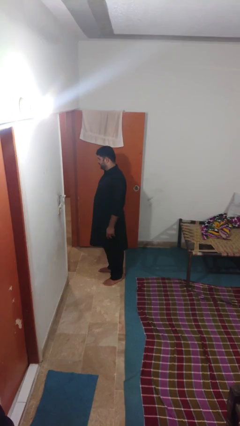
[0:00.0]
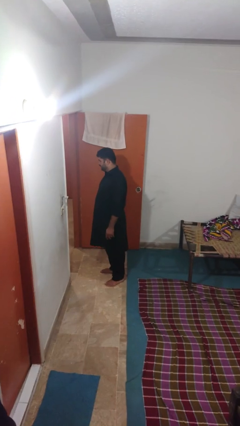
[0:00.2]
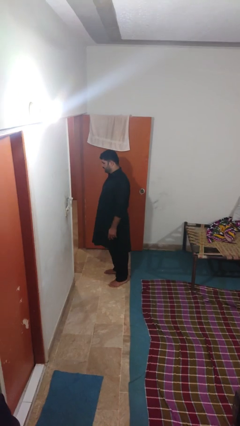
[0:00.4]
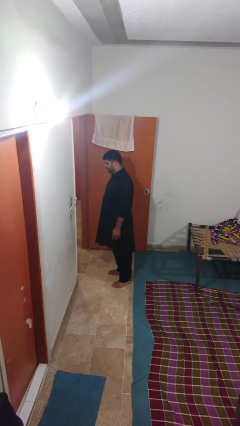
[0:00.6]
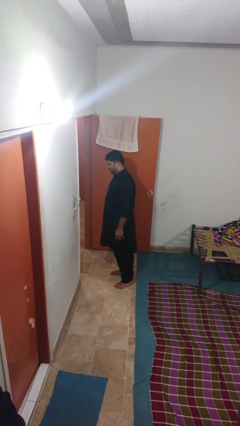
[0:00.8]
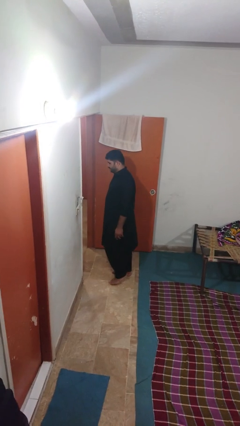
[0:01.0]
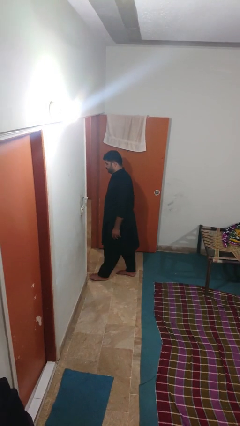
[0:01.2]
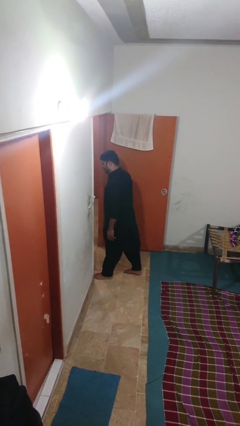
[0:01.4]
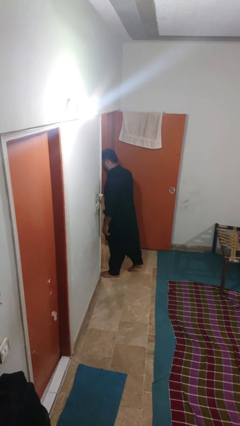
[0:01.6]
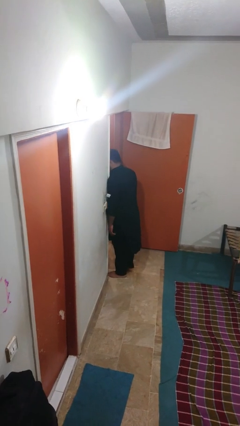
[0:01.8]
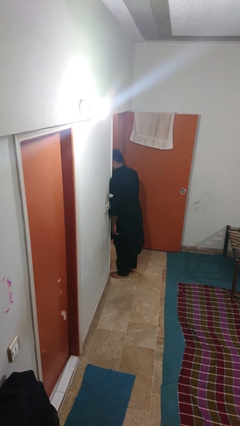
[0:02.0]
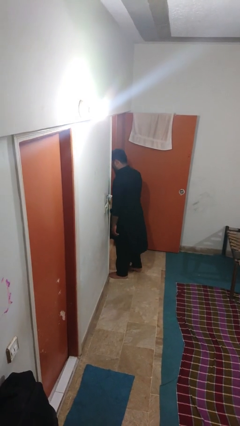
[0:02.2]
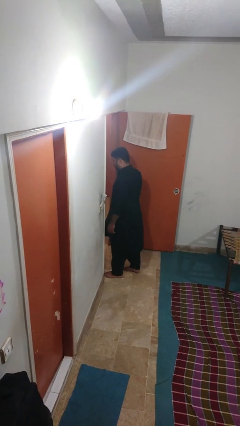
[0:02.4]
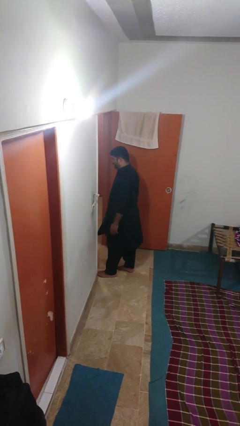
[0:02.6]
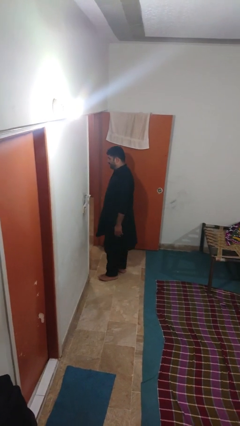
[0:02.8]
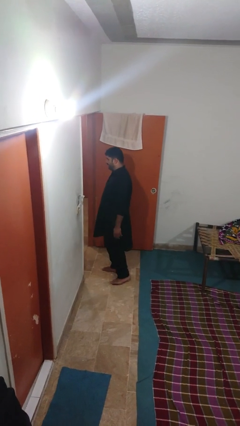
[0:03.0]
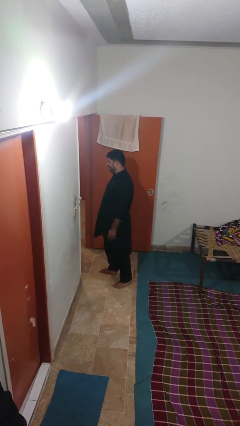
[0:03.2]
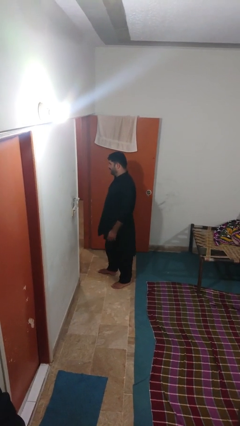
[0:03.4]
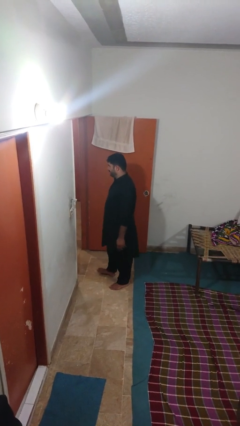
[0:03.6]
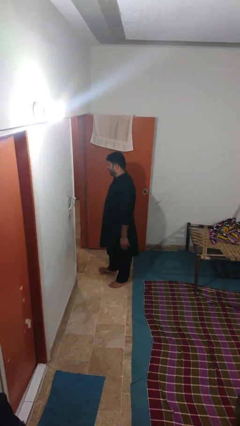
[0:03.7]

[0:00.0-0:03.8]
person bumps into wall

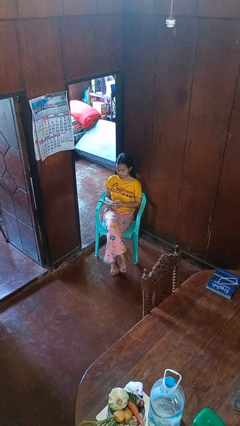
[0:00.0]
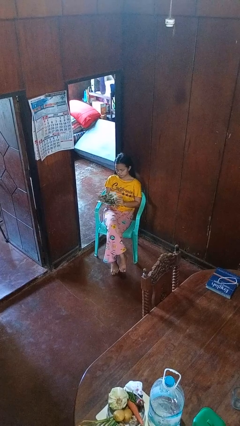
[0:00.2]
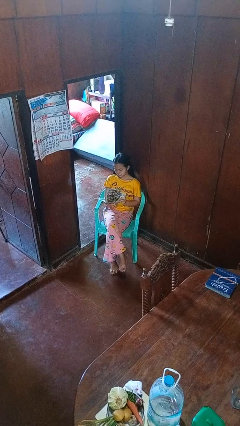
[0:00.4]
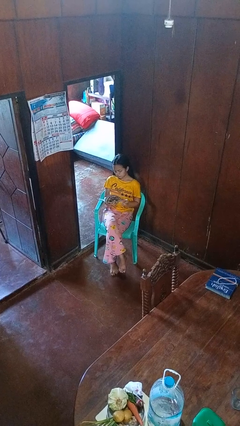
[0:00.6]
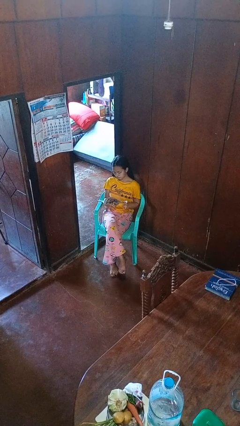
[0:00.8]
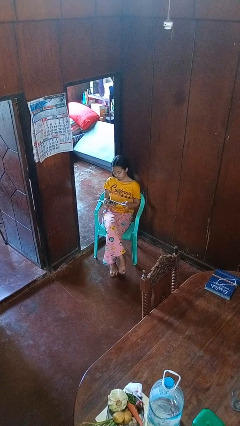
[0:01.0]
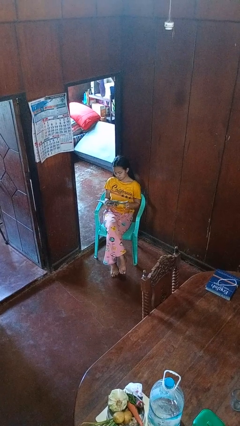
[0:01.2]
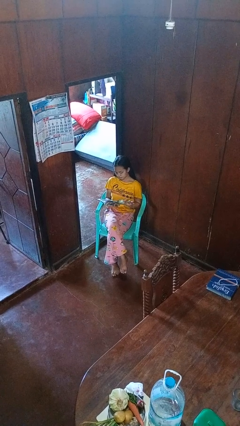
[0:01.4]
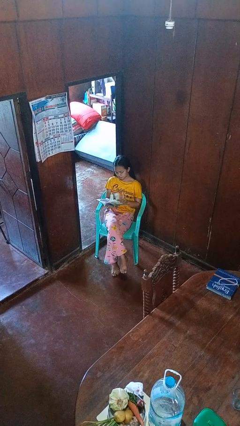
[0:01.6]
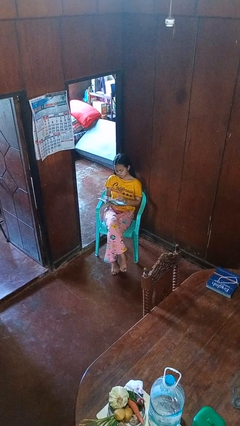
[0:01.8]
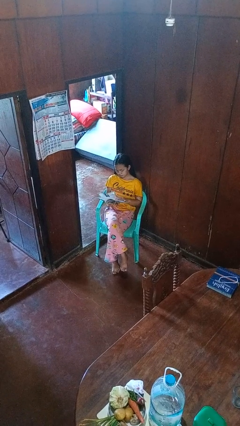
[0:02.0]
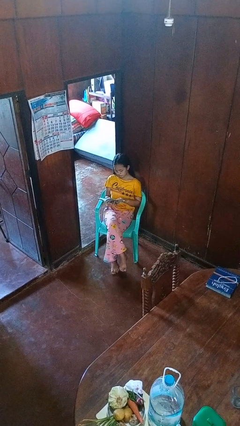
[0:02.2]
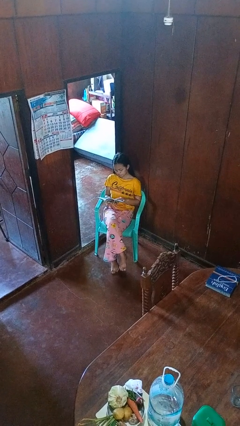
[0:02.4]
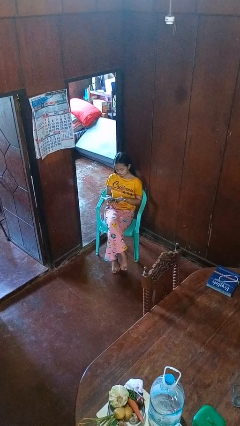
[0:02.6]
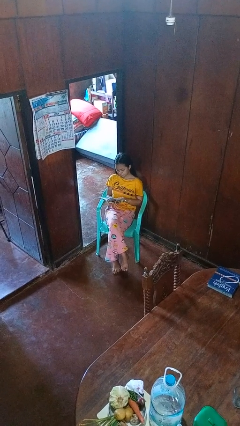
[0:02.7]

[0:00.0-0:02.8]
person reads magazine

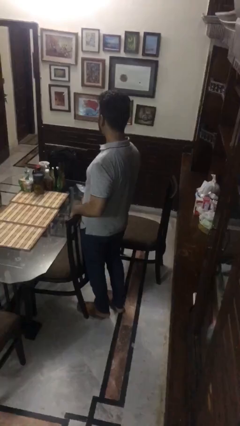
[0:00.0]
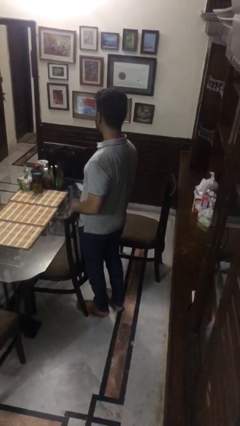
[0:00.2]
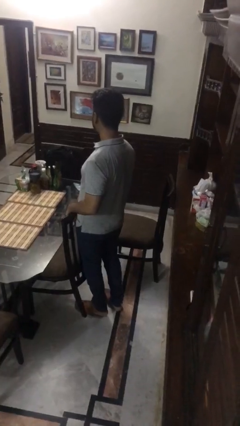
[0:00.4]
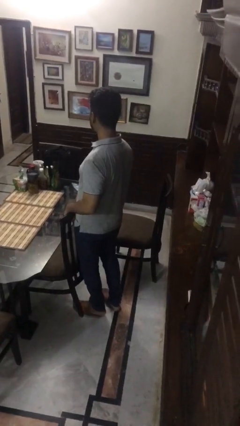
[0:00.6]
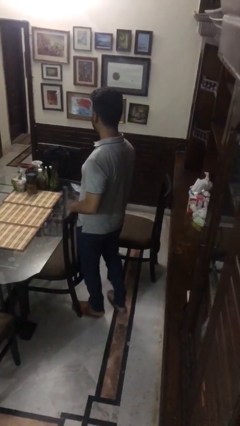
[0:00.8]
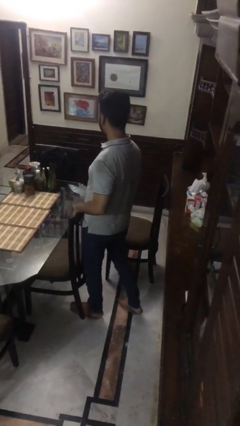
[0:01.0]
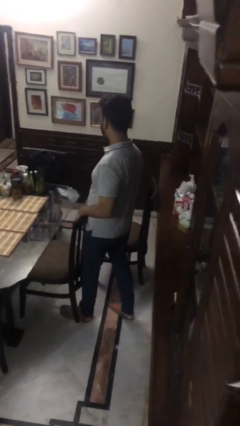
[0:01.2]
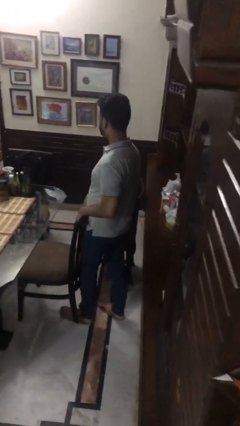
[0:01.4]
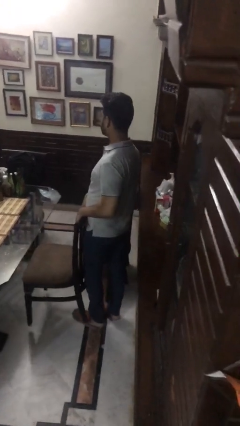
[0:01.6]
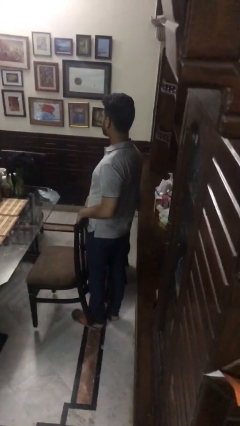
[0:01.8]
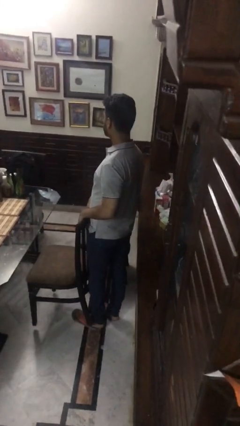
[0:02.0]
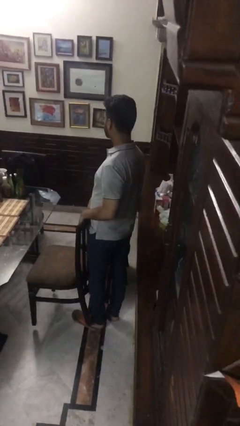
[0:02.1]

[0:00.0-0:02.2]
person pulls out chair

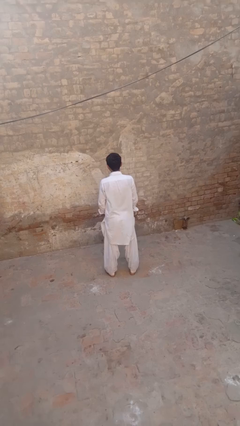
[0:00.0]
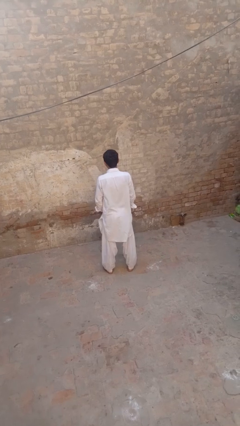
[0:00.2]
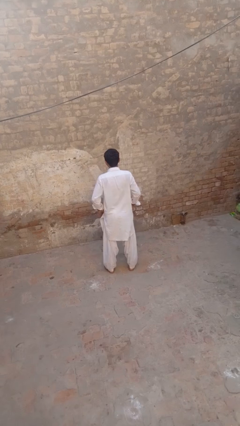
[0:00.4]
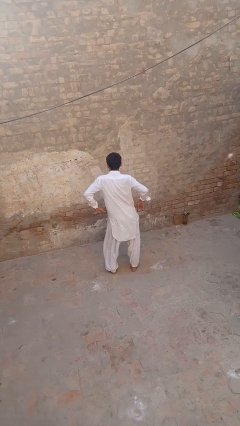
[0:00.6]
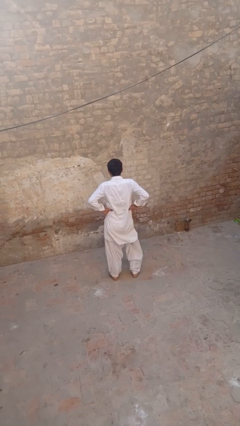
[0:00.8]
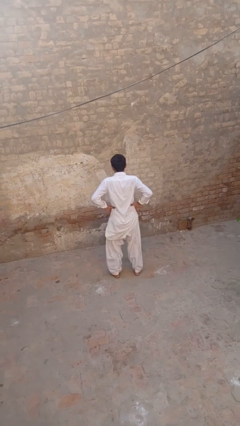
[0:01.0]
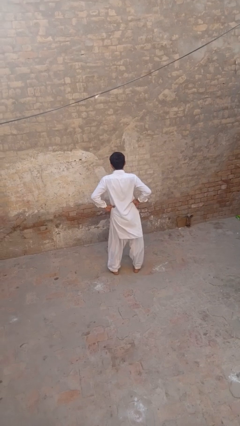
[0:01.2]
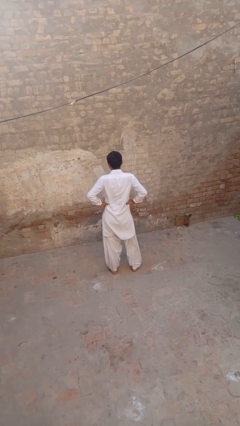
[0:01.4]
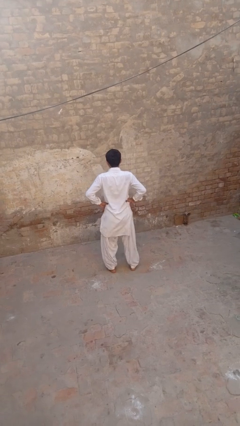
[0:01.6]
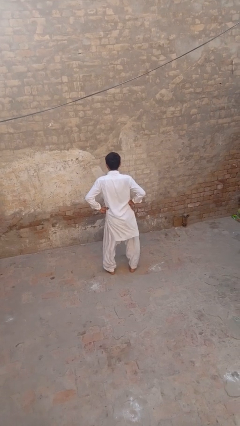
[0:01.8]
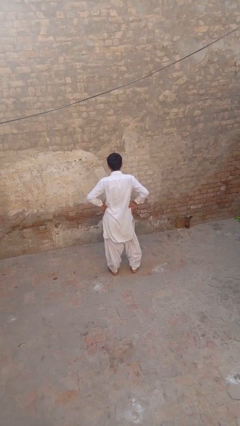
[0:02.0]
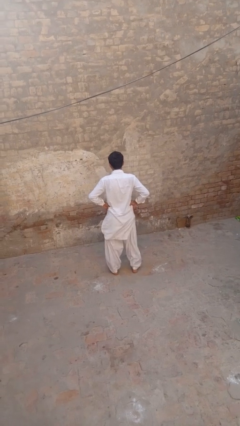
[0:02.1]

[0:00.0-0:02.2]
person wiggles hips

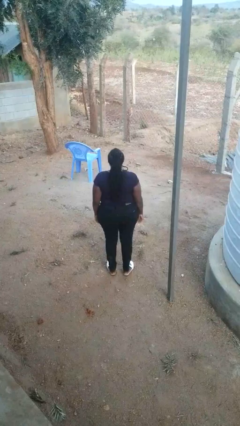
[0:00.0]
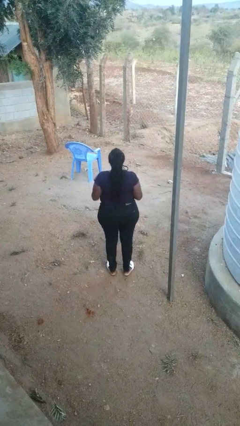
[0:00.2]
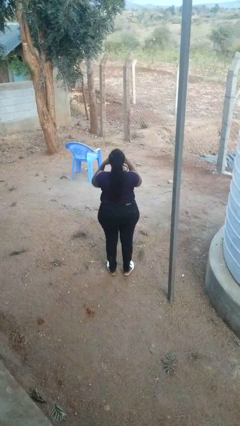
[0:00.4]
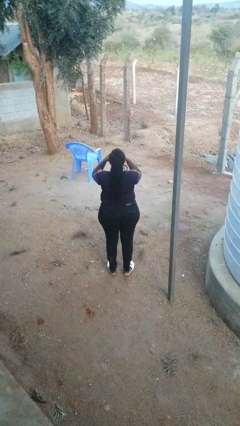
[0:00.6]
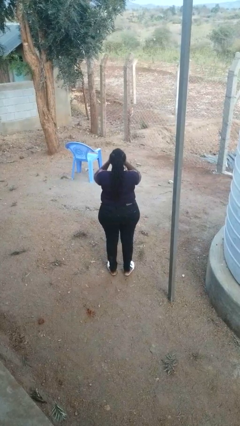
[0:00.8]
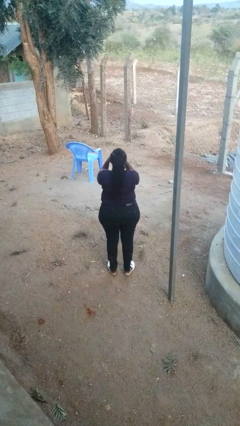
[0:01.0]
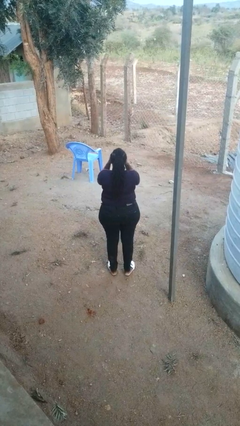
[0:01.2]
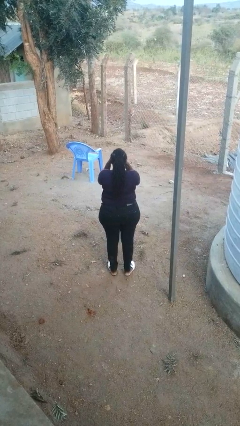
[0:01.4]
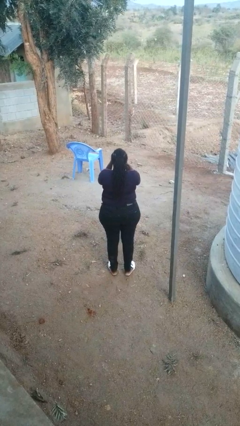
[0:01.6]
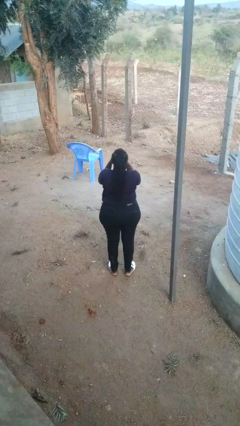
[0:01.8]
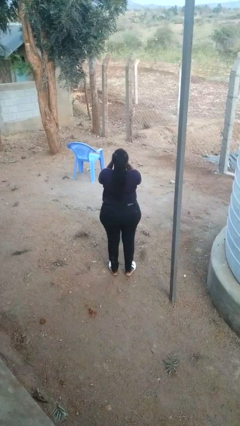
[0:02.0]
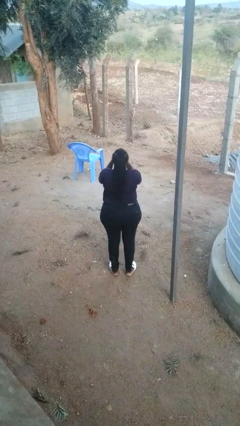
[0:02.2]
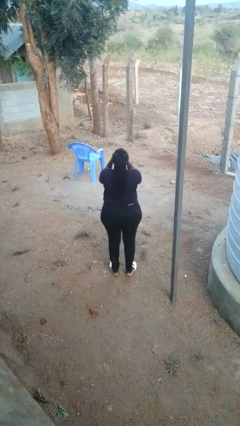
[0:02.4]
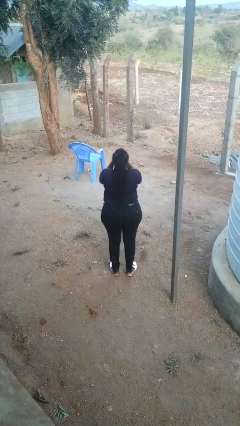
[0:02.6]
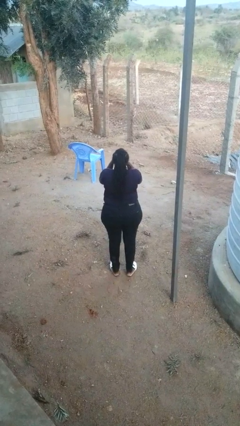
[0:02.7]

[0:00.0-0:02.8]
person rubs eyes

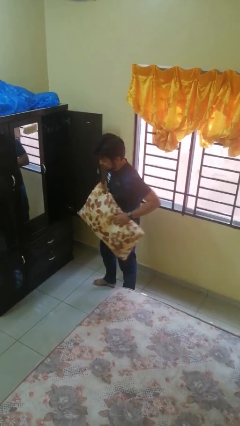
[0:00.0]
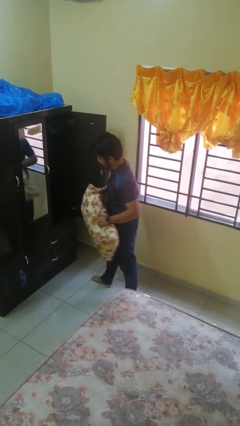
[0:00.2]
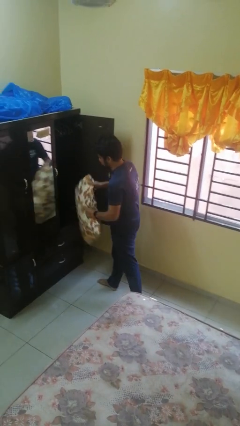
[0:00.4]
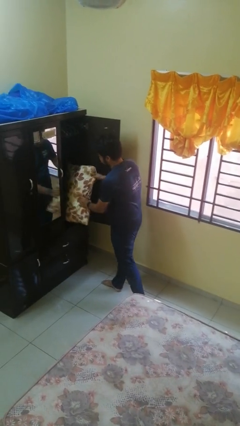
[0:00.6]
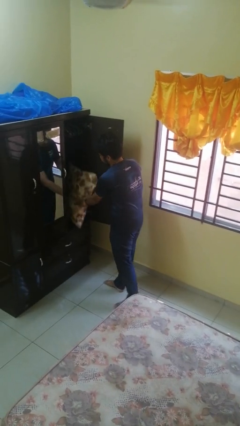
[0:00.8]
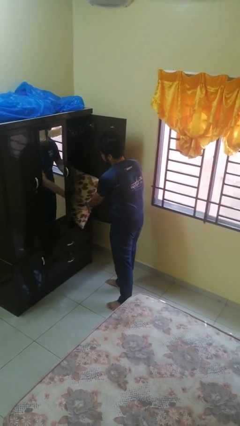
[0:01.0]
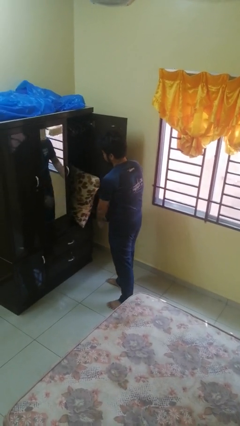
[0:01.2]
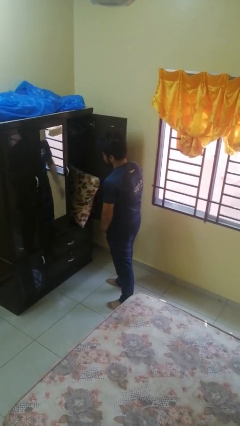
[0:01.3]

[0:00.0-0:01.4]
person puts down object into cabinet

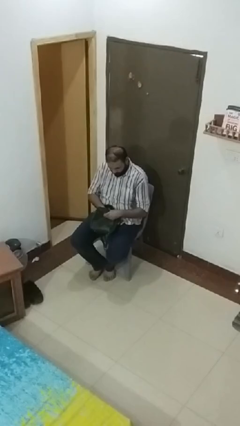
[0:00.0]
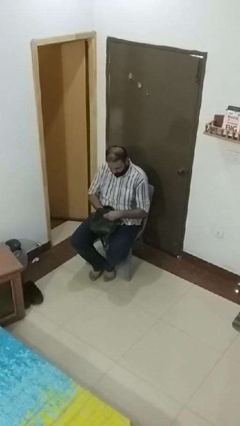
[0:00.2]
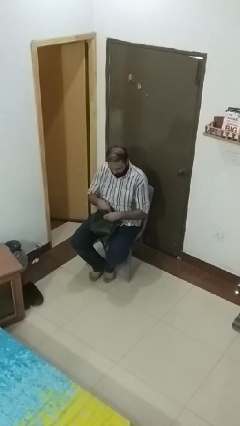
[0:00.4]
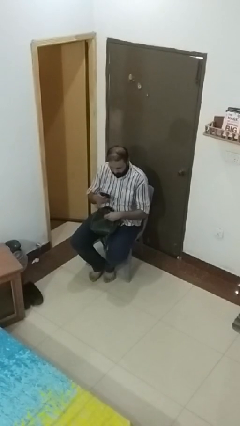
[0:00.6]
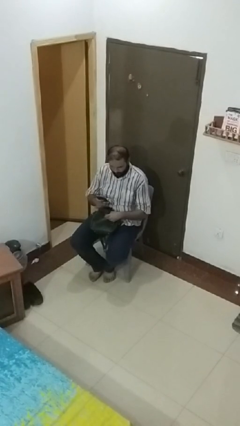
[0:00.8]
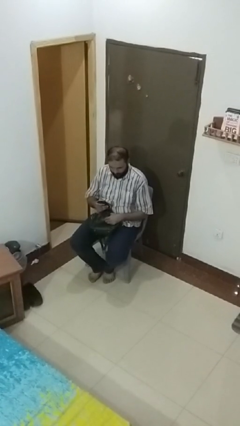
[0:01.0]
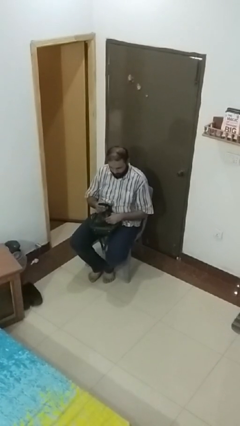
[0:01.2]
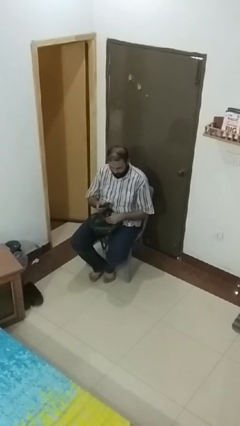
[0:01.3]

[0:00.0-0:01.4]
person takes object from purse
